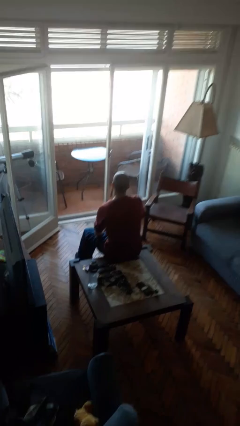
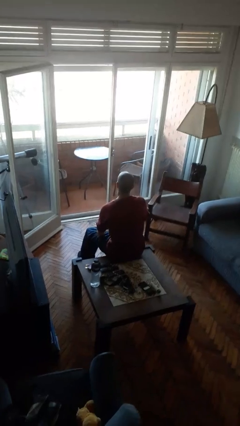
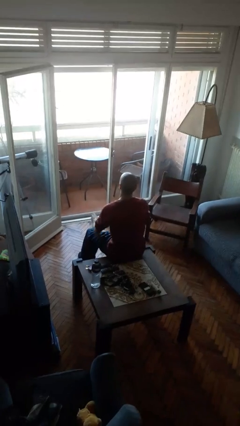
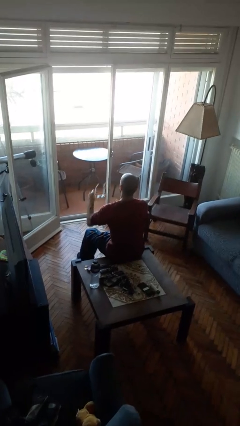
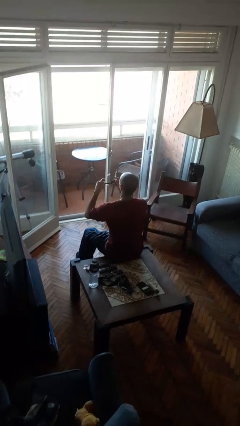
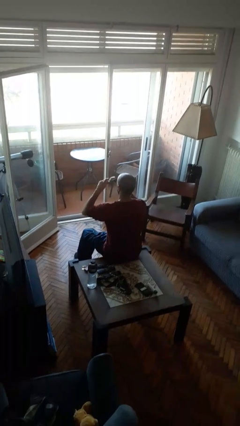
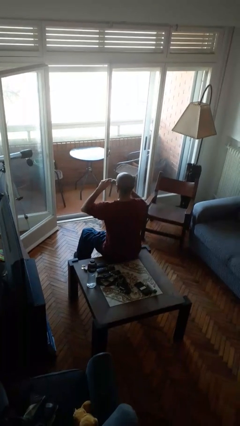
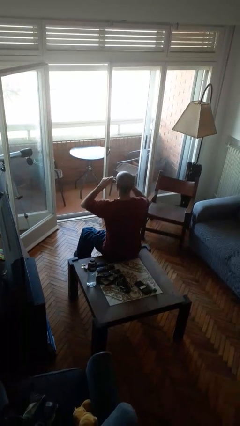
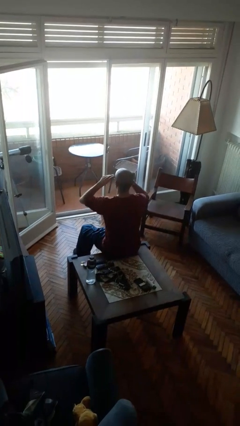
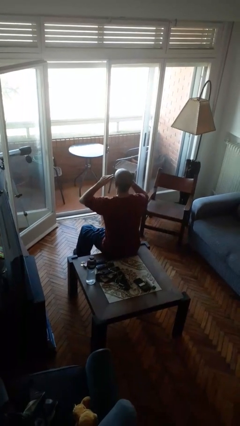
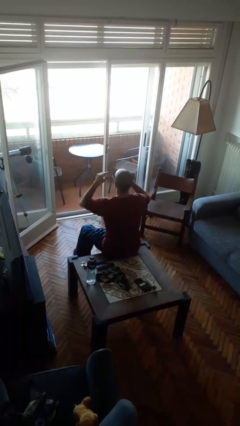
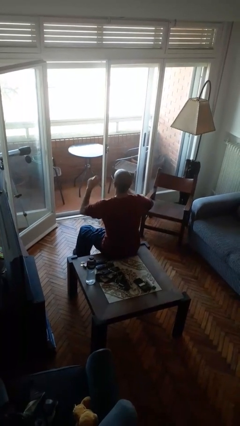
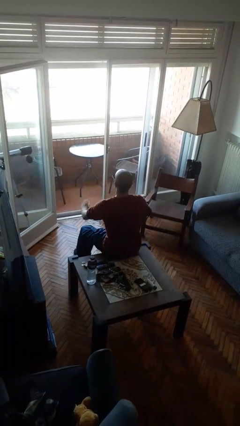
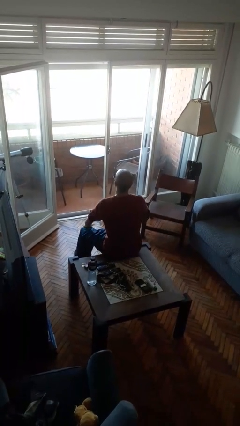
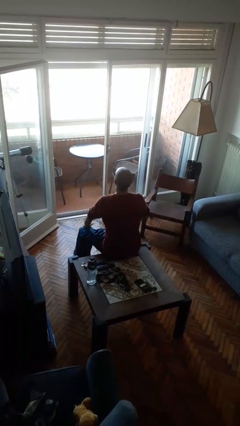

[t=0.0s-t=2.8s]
person puts on sunglasses

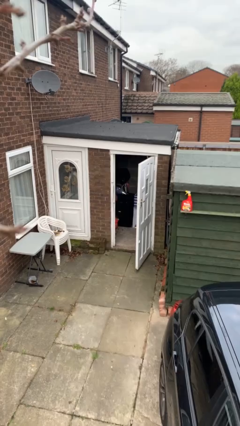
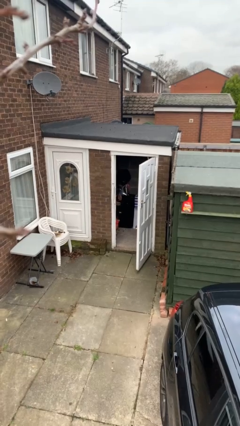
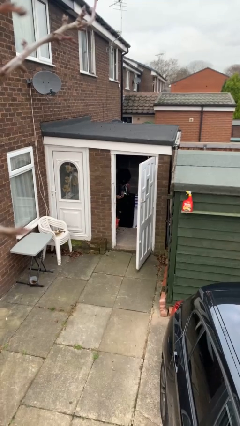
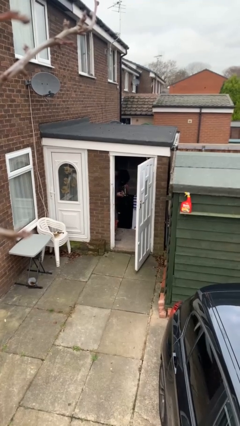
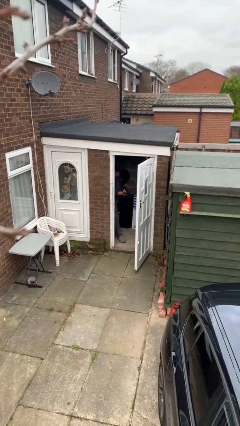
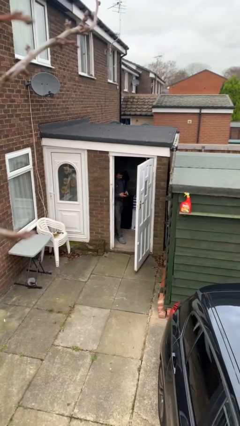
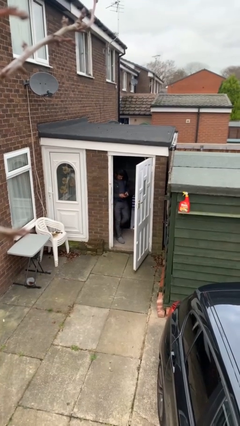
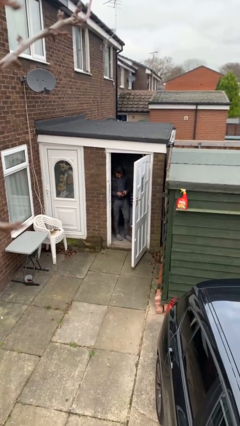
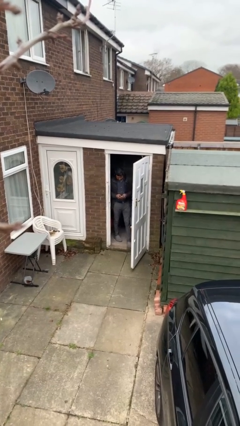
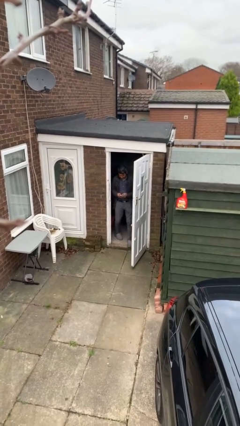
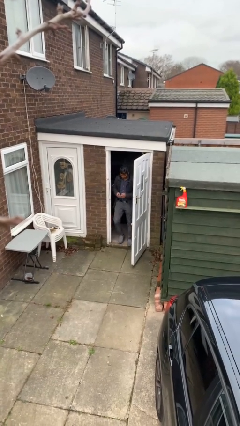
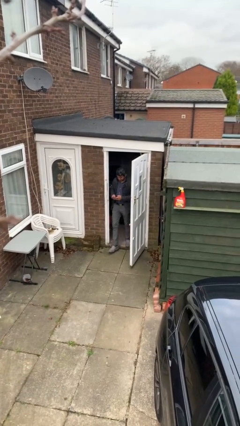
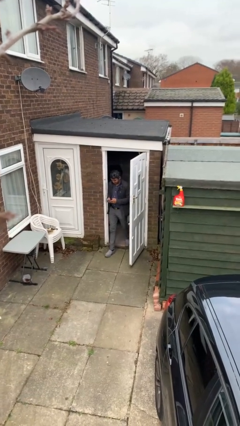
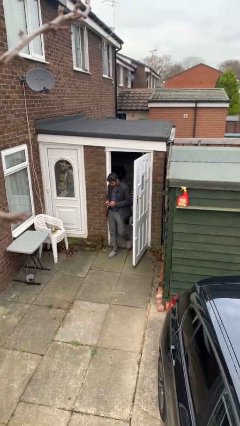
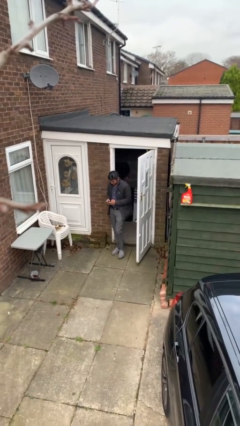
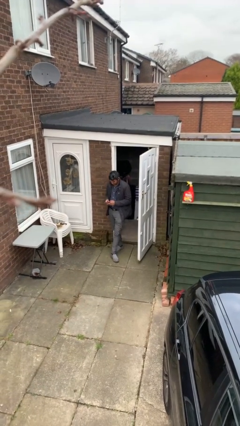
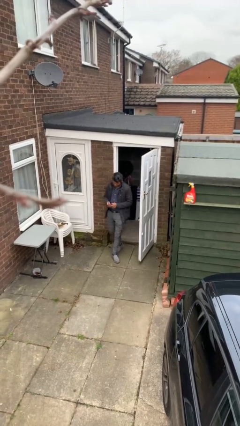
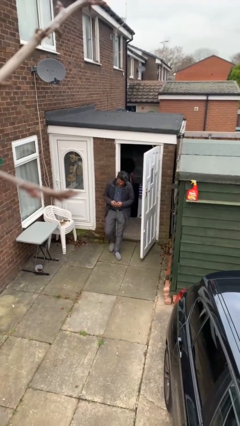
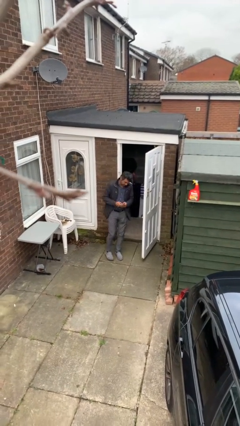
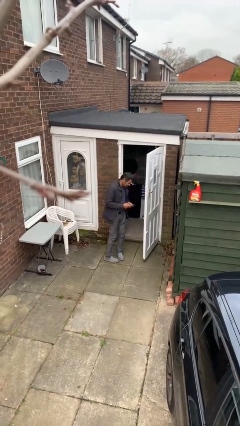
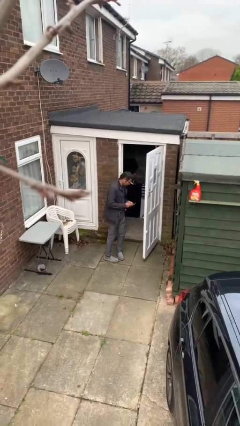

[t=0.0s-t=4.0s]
person enters scene through structure

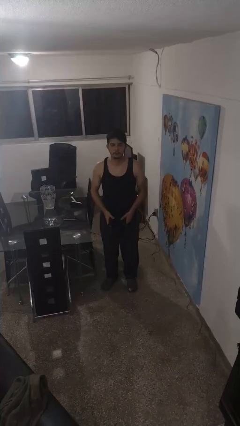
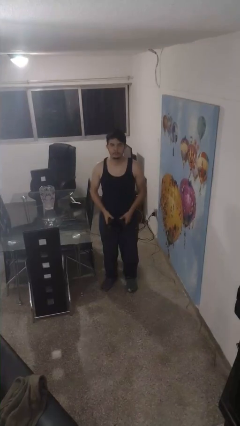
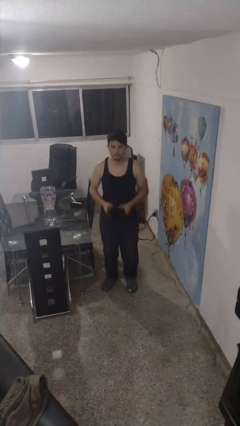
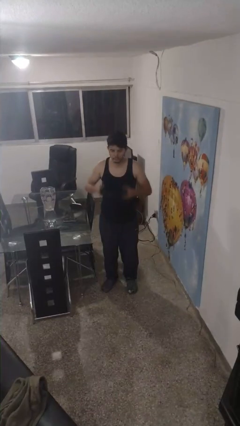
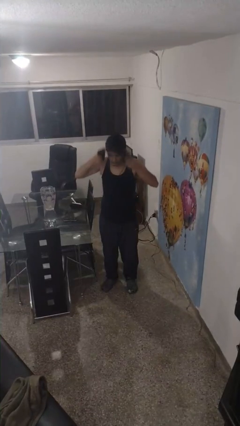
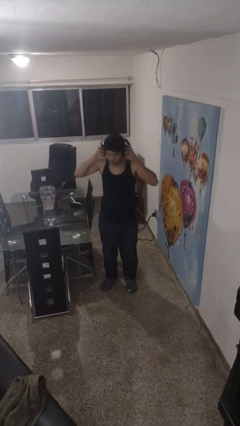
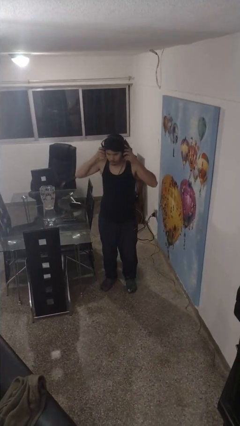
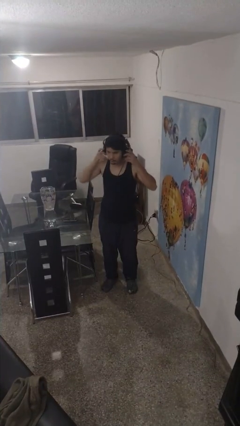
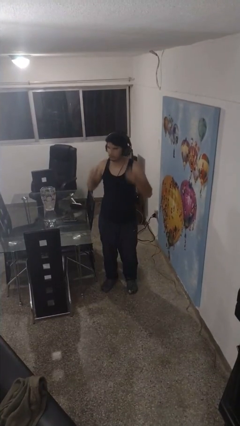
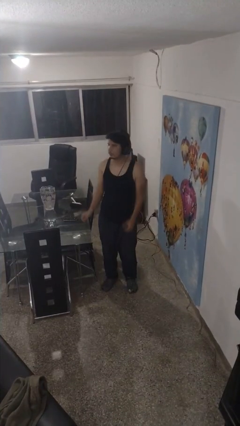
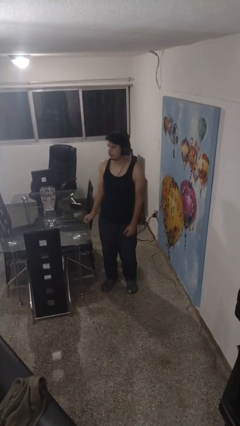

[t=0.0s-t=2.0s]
person puts on headphones

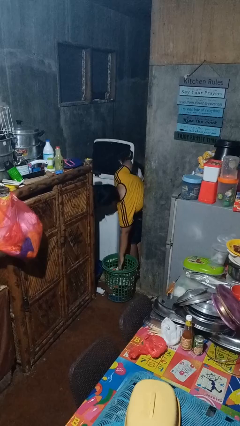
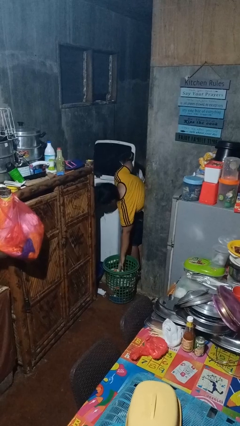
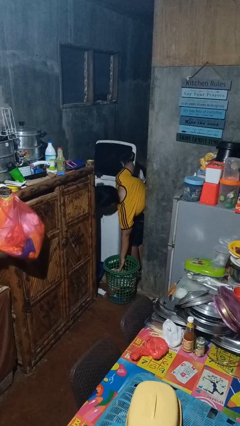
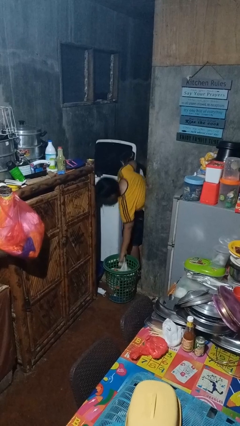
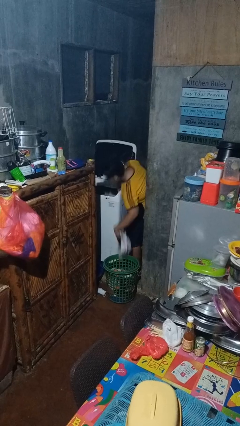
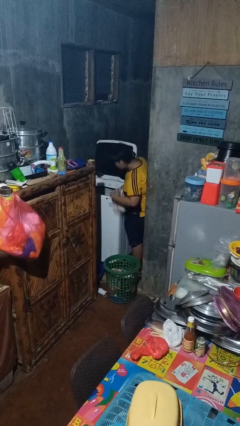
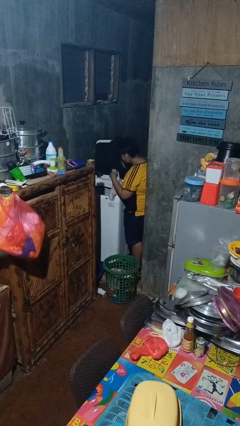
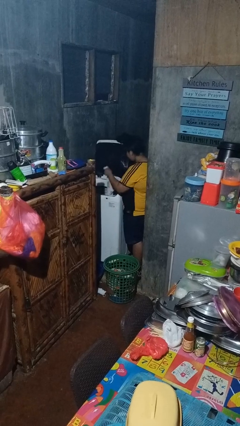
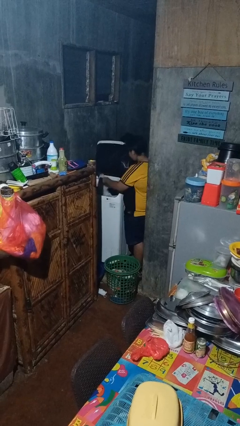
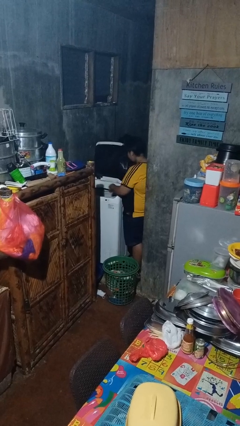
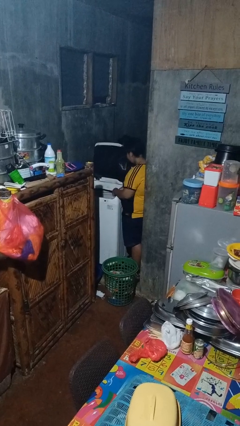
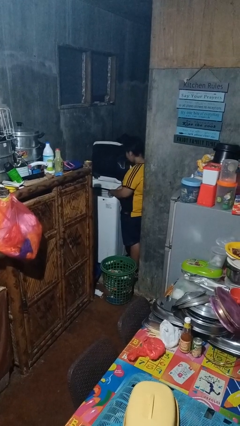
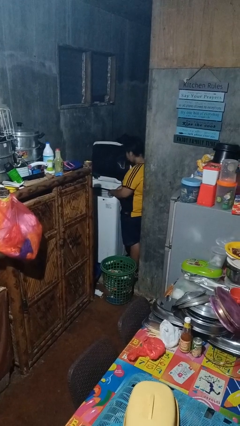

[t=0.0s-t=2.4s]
person loads clotheswasher

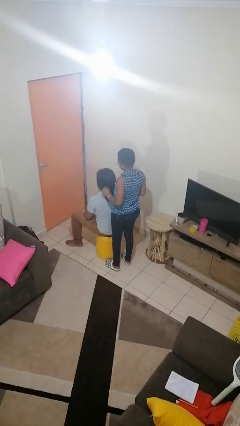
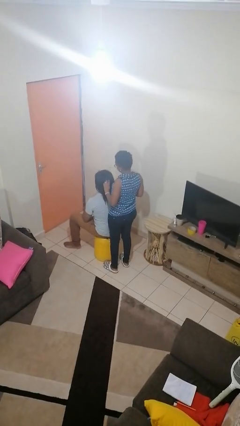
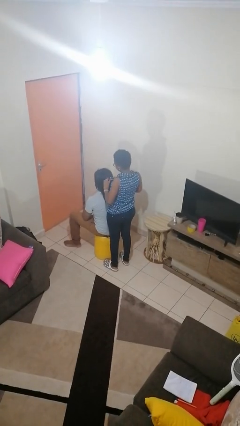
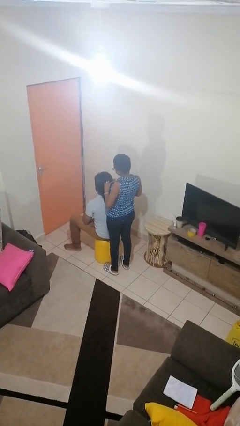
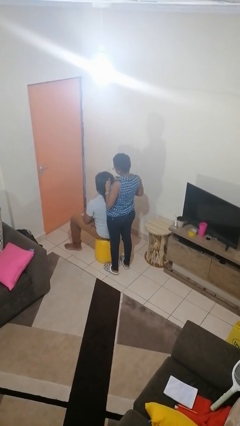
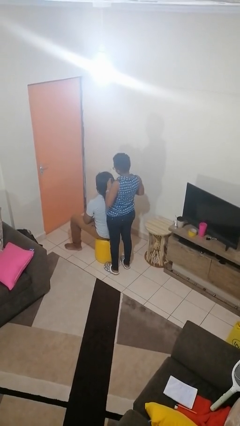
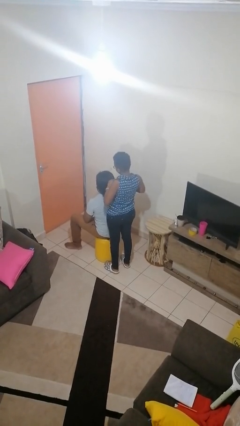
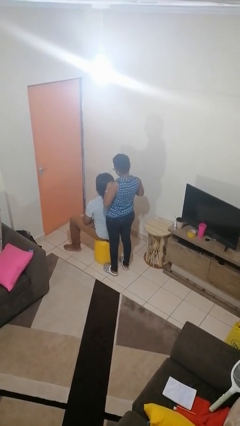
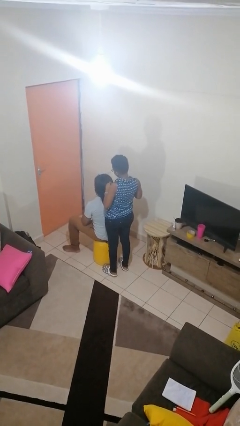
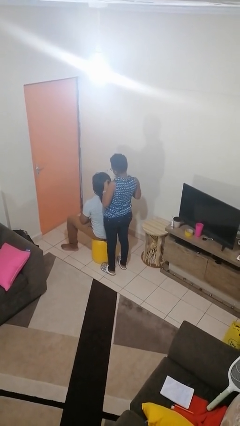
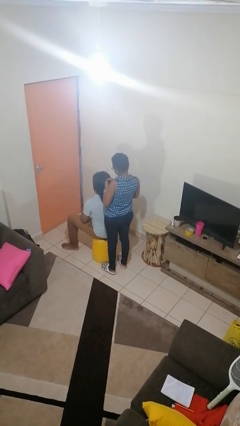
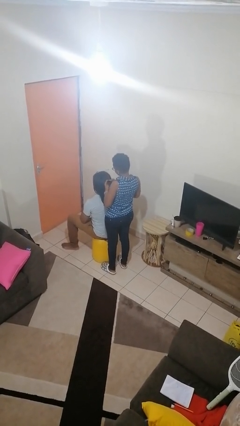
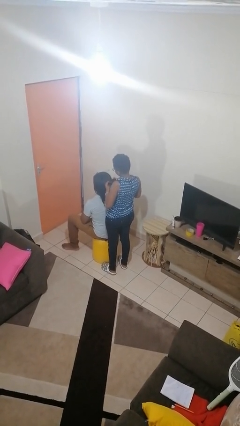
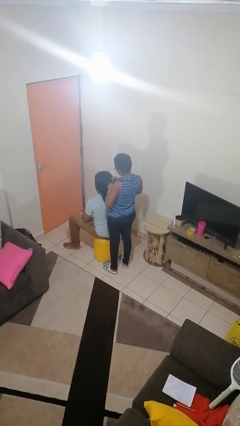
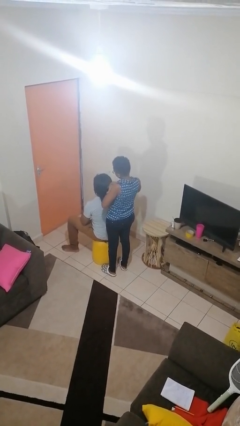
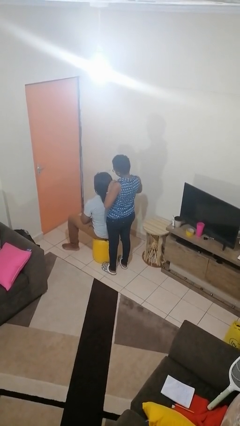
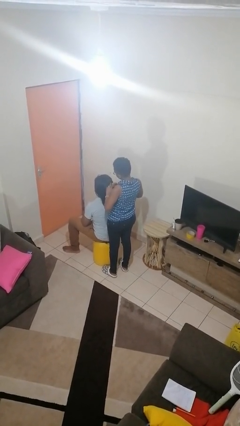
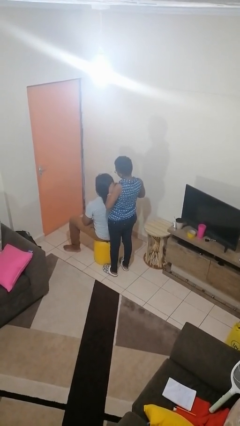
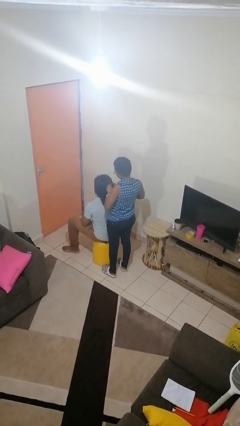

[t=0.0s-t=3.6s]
person braids hair of person

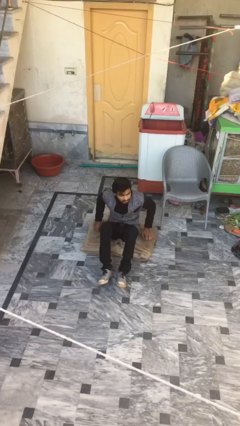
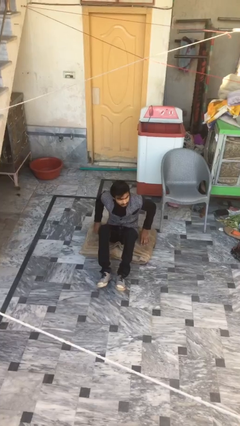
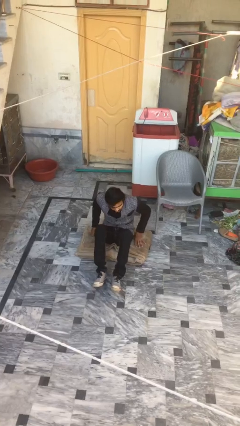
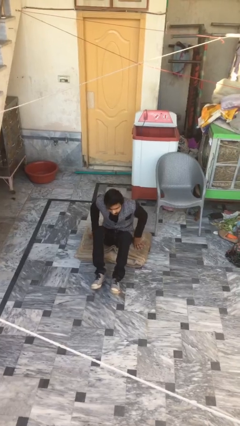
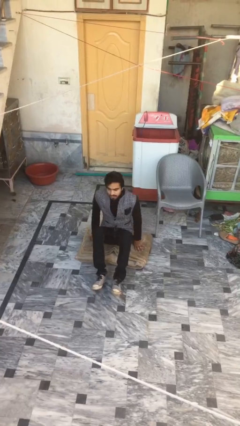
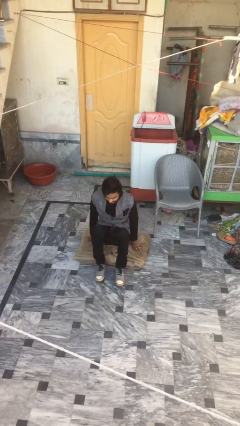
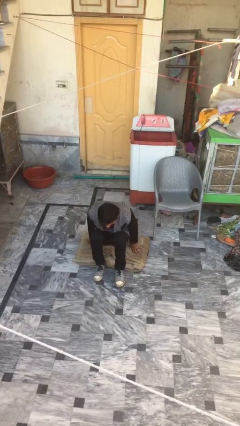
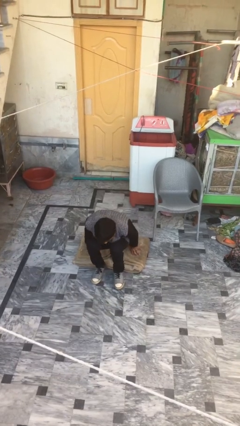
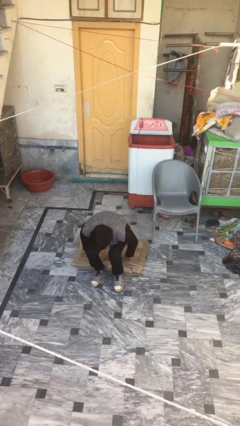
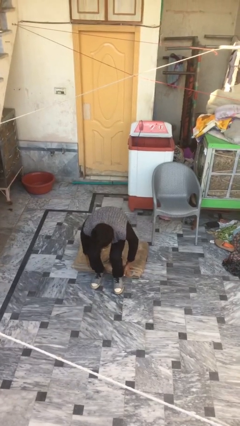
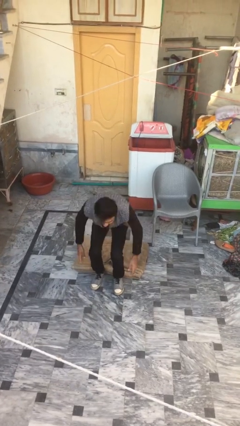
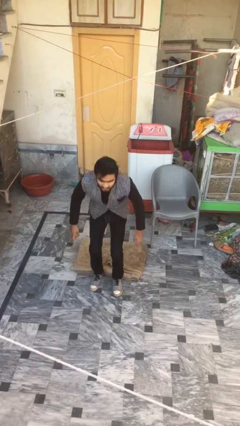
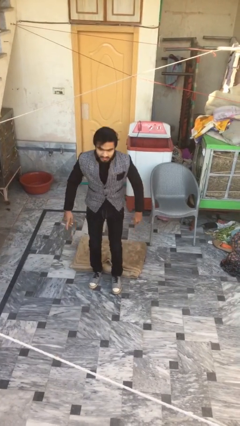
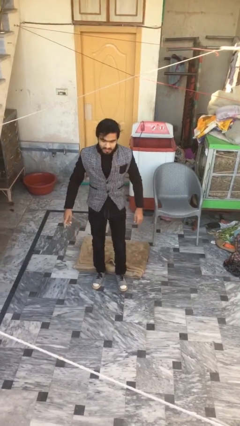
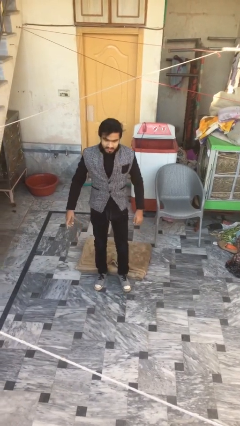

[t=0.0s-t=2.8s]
person stands up
